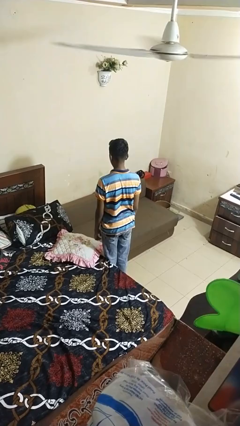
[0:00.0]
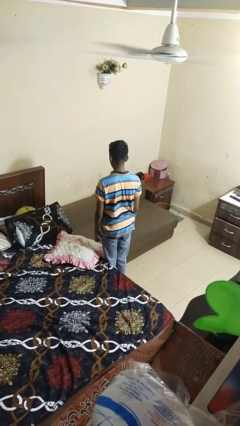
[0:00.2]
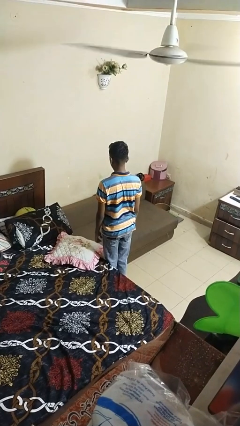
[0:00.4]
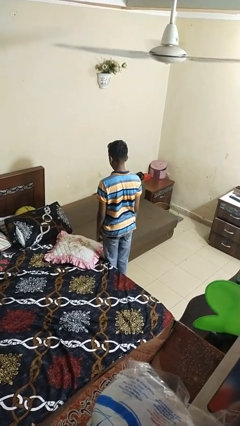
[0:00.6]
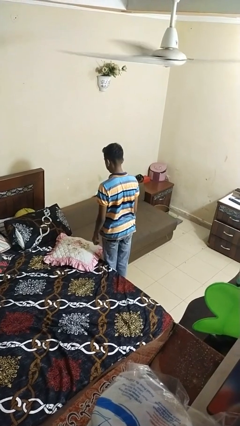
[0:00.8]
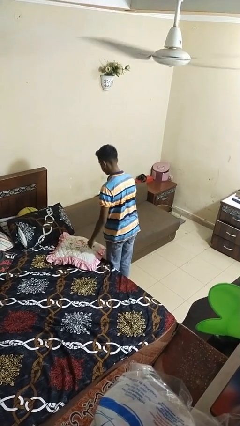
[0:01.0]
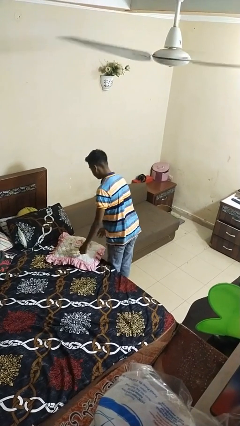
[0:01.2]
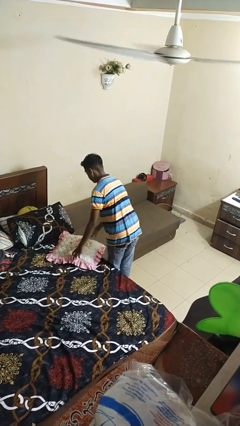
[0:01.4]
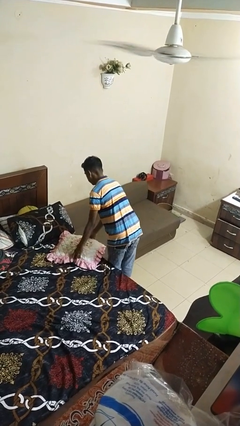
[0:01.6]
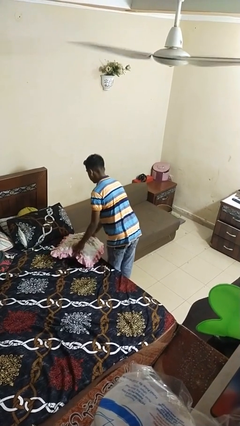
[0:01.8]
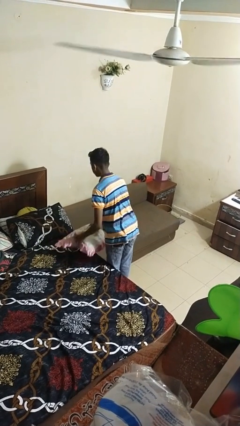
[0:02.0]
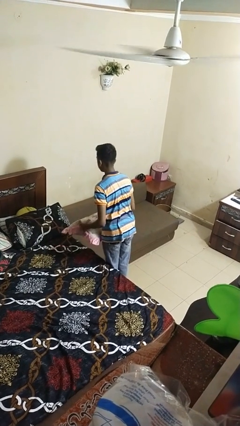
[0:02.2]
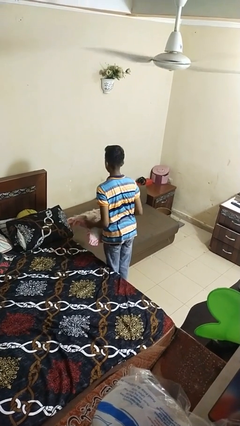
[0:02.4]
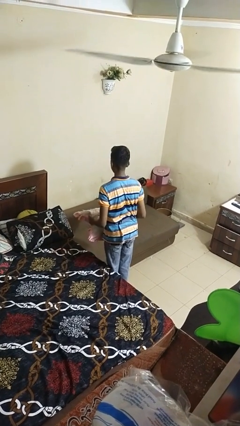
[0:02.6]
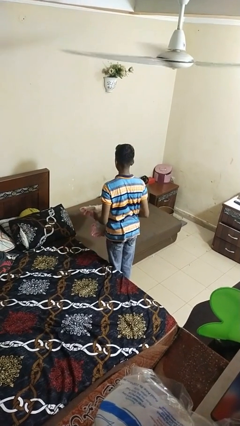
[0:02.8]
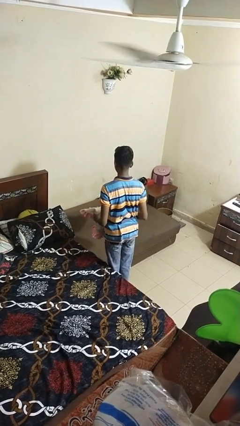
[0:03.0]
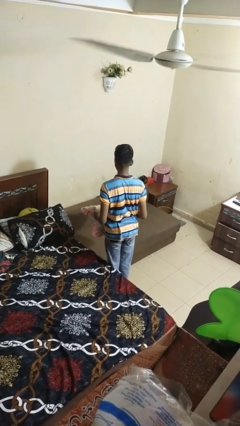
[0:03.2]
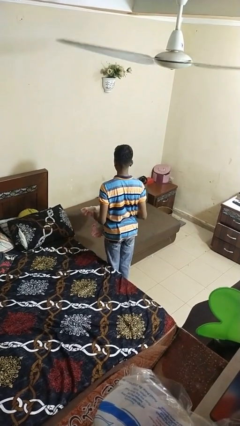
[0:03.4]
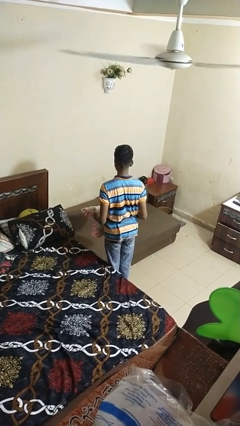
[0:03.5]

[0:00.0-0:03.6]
person picks up object from bed

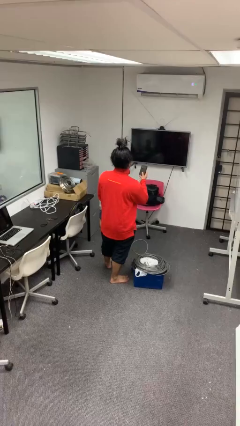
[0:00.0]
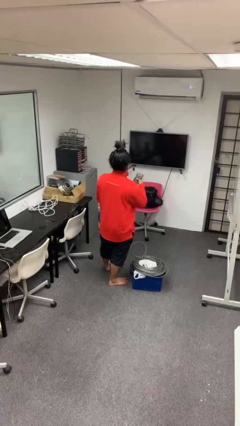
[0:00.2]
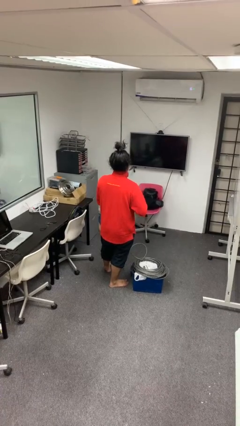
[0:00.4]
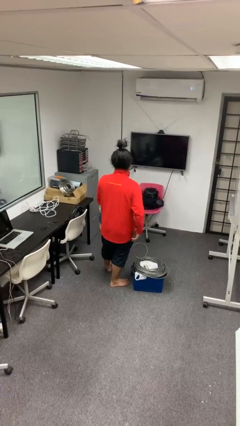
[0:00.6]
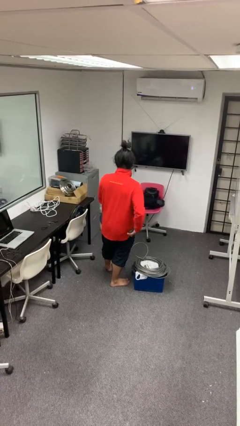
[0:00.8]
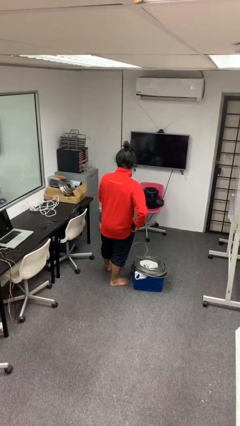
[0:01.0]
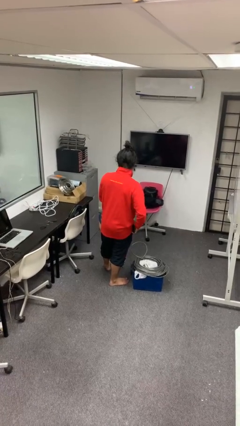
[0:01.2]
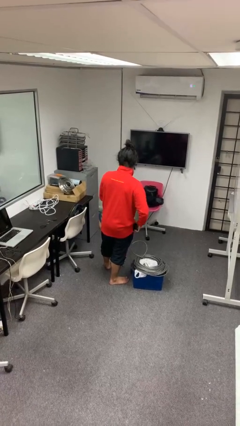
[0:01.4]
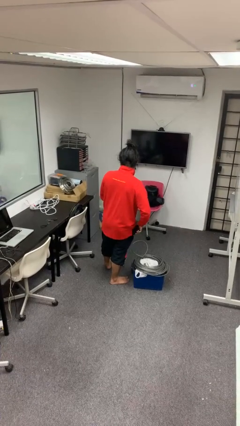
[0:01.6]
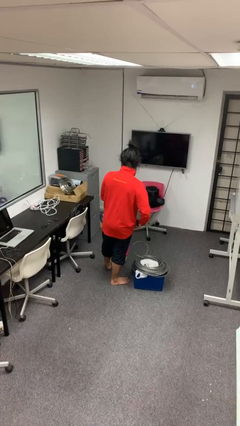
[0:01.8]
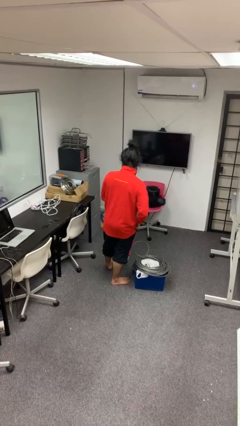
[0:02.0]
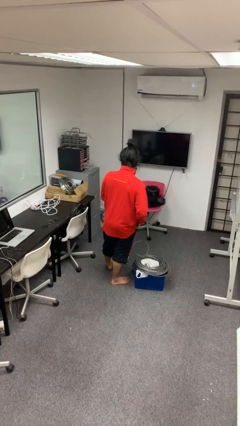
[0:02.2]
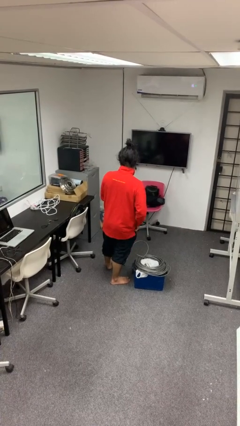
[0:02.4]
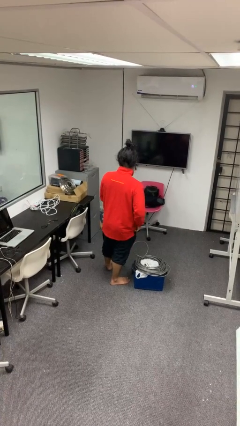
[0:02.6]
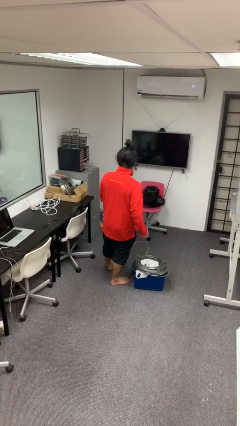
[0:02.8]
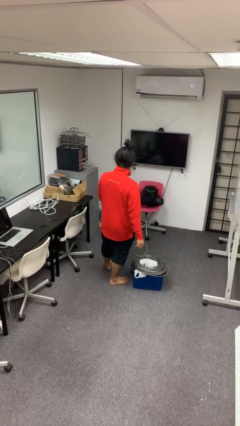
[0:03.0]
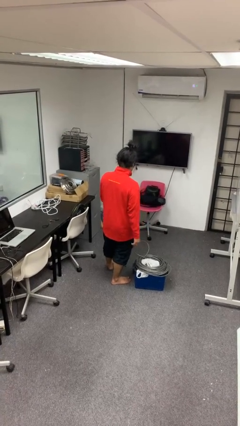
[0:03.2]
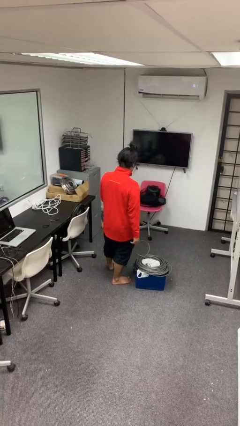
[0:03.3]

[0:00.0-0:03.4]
person puts phone into pocket

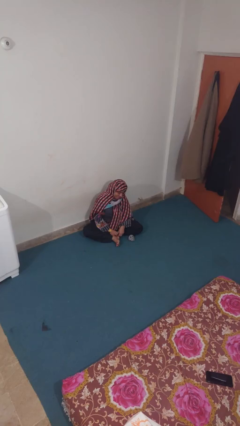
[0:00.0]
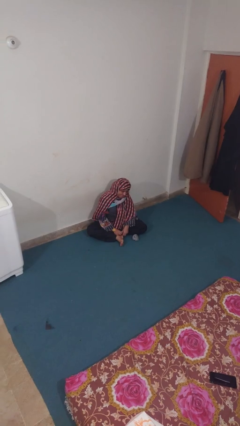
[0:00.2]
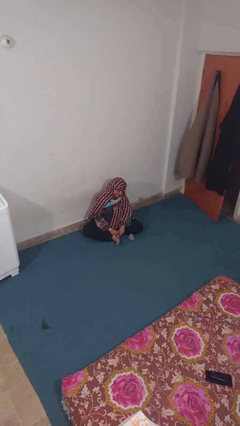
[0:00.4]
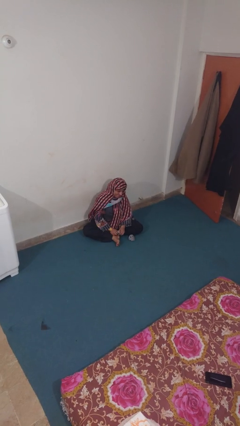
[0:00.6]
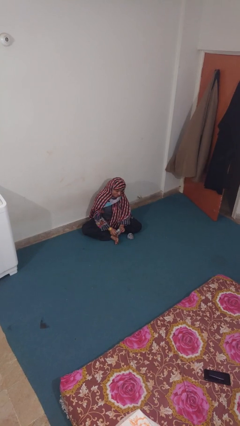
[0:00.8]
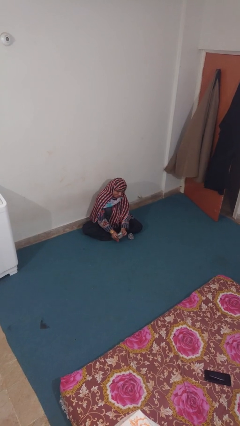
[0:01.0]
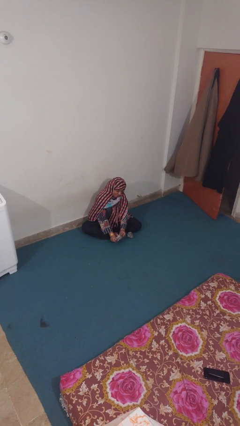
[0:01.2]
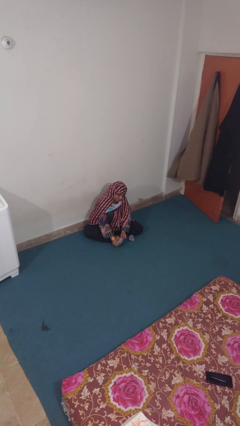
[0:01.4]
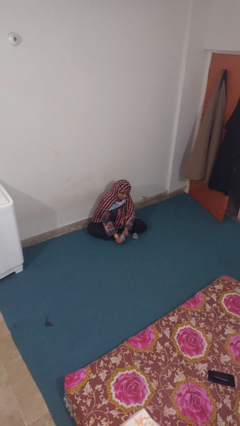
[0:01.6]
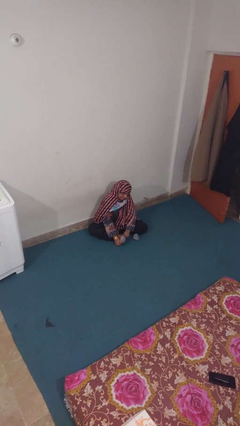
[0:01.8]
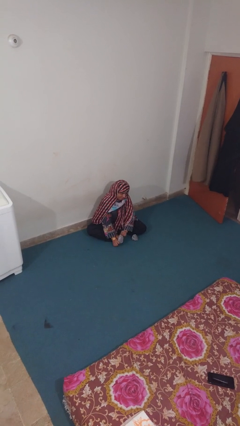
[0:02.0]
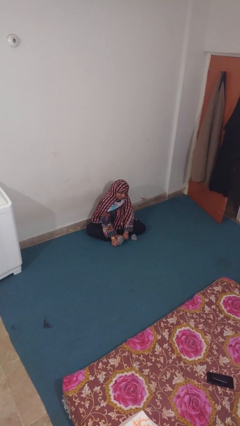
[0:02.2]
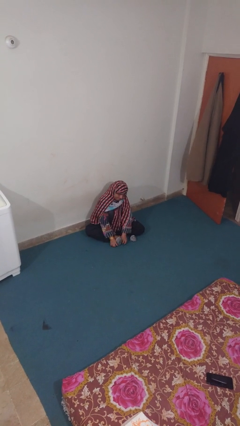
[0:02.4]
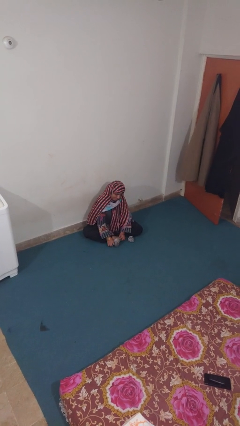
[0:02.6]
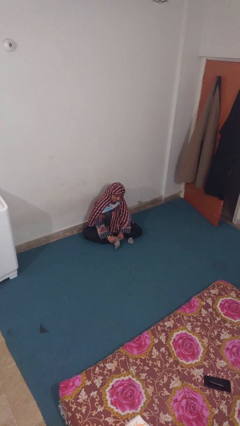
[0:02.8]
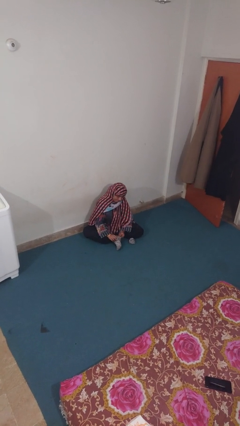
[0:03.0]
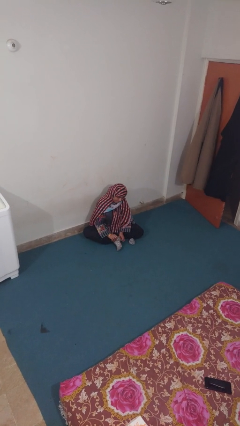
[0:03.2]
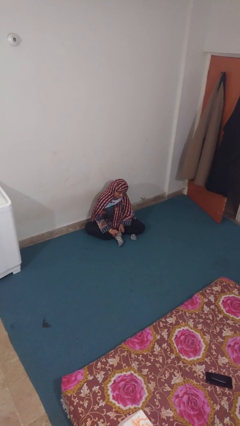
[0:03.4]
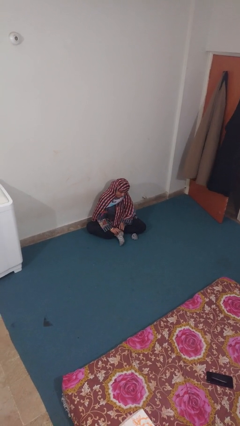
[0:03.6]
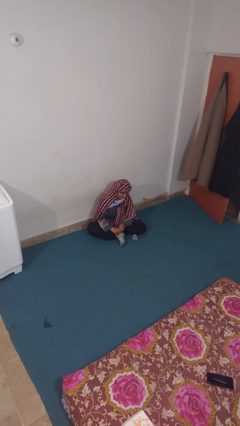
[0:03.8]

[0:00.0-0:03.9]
person puts on socks

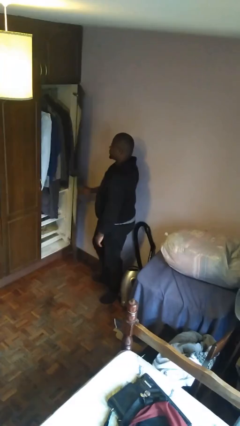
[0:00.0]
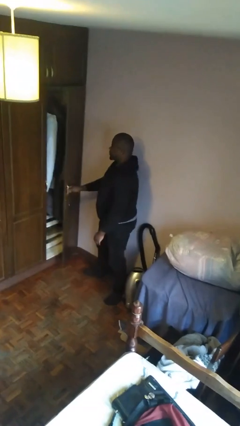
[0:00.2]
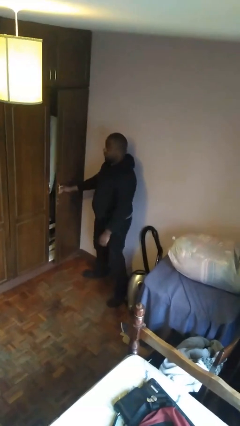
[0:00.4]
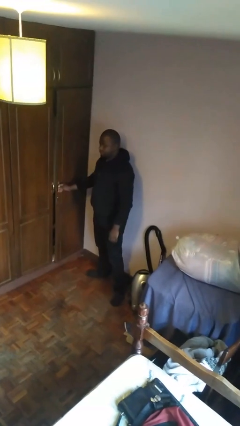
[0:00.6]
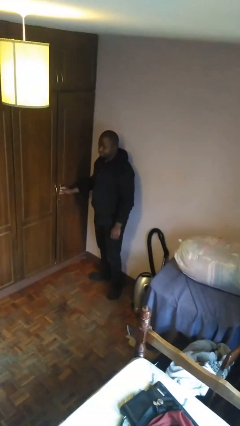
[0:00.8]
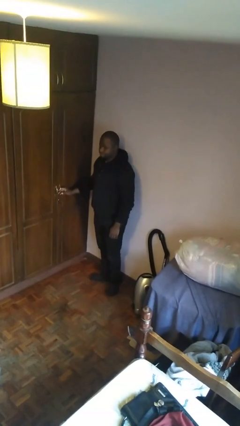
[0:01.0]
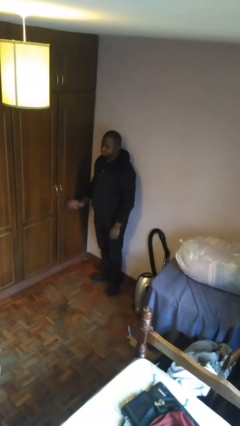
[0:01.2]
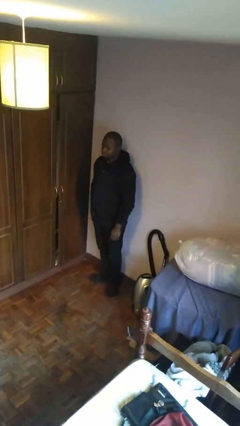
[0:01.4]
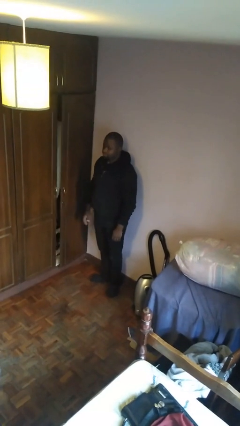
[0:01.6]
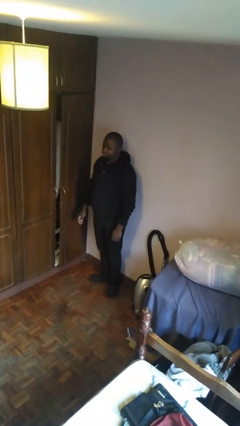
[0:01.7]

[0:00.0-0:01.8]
person closes closet door

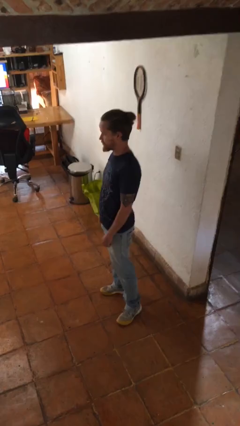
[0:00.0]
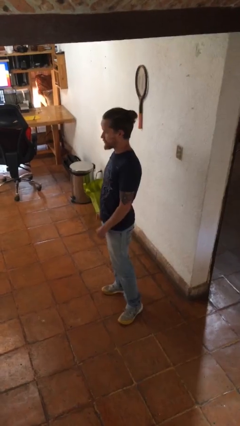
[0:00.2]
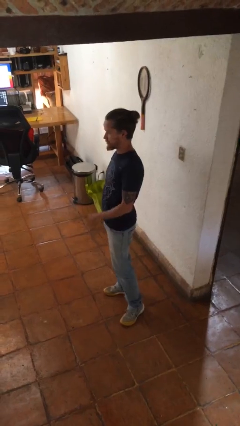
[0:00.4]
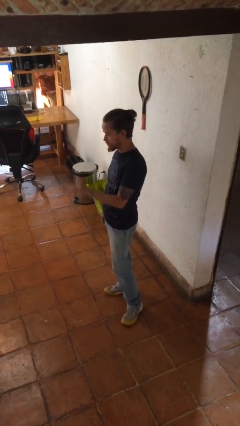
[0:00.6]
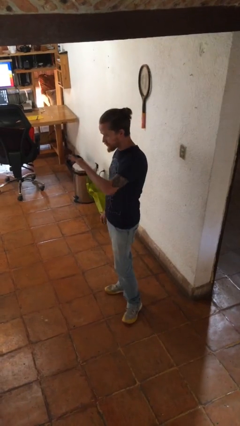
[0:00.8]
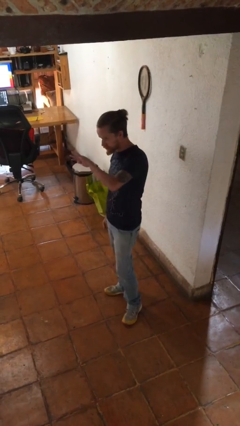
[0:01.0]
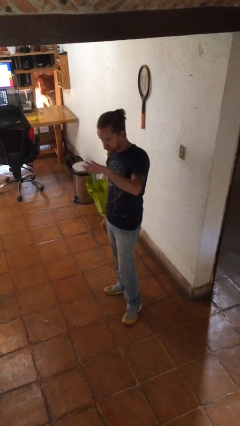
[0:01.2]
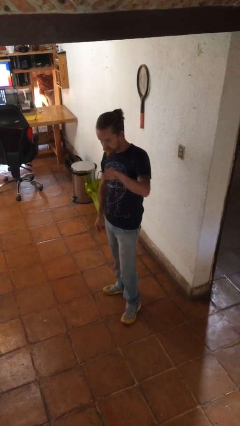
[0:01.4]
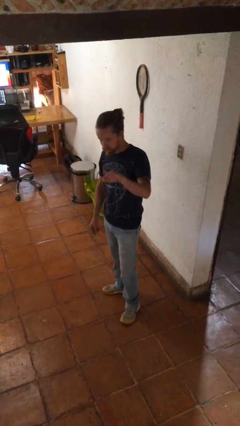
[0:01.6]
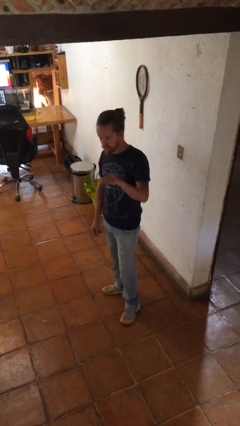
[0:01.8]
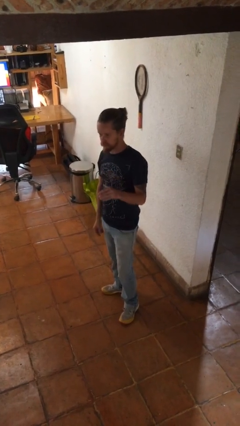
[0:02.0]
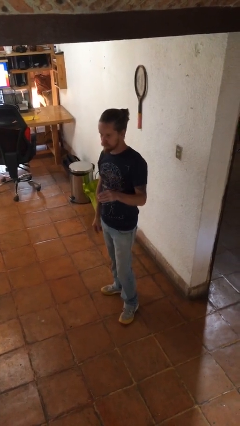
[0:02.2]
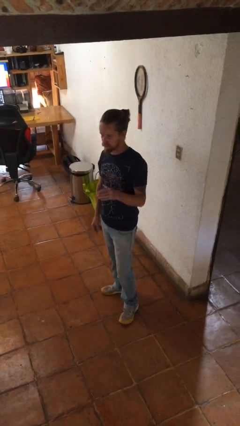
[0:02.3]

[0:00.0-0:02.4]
person gestures swipe left

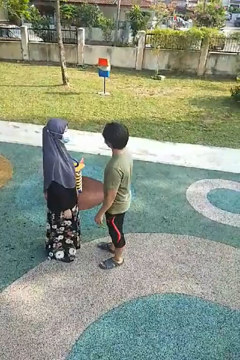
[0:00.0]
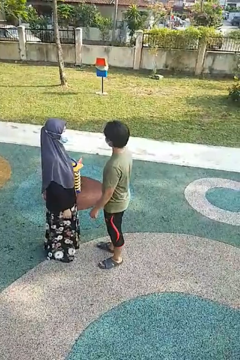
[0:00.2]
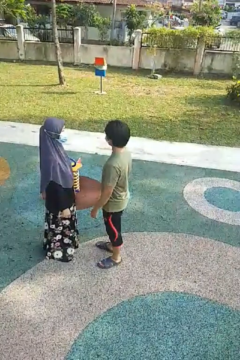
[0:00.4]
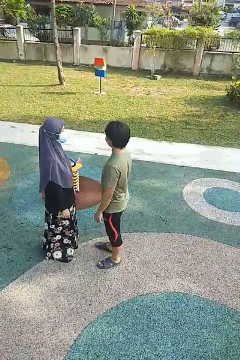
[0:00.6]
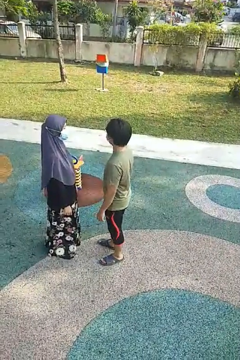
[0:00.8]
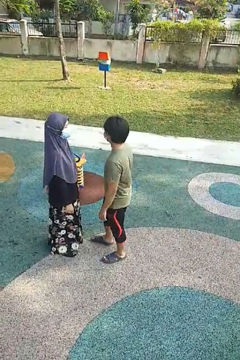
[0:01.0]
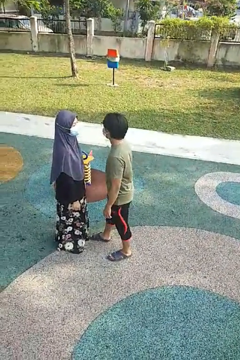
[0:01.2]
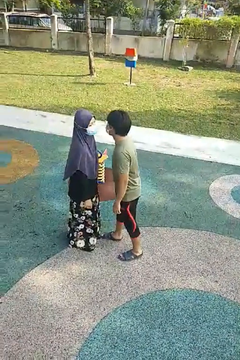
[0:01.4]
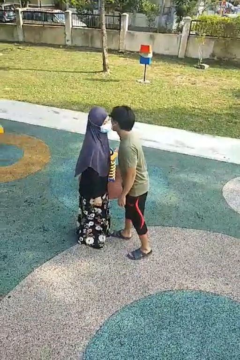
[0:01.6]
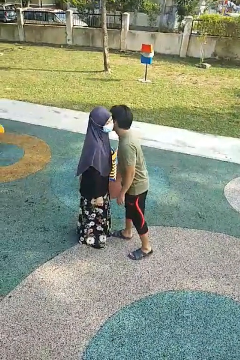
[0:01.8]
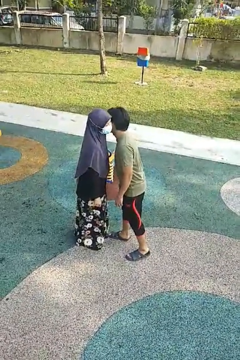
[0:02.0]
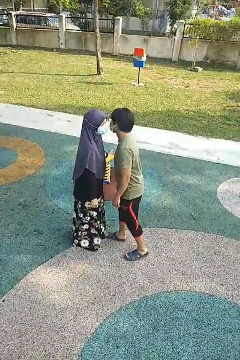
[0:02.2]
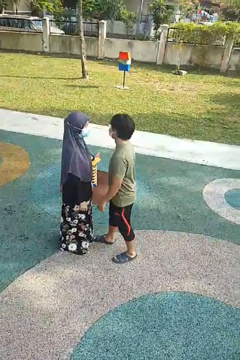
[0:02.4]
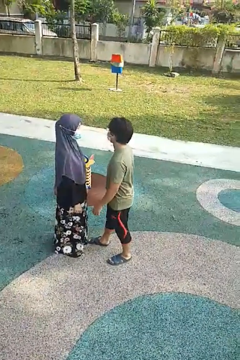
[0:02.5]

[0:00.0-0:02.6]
person kisses cheek of person
